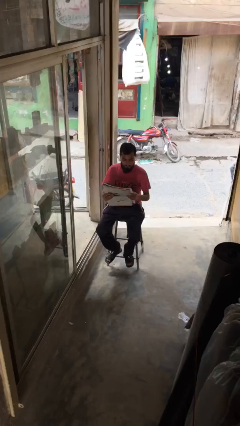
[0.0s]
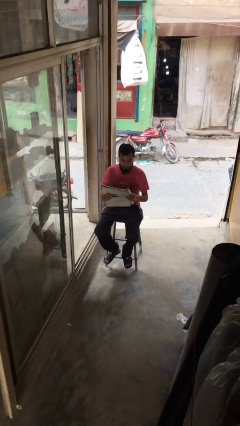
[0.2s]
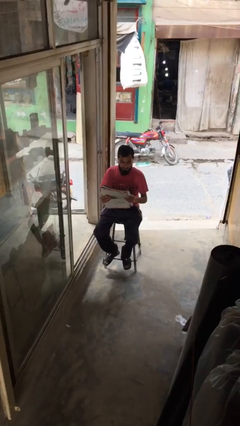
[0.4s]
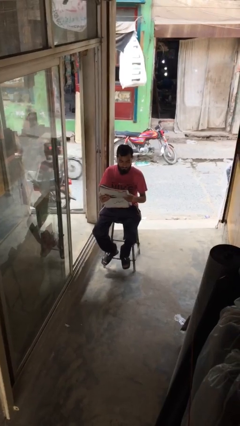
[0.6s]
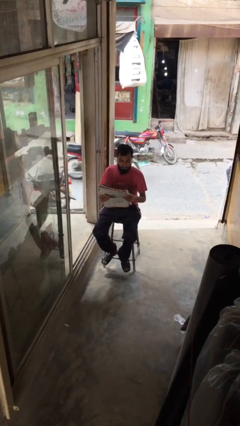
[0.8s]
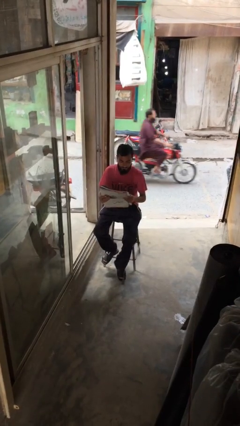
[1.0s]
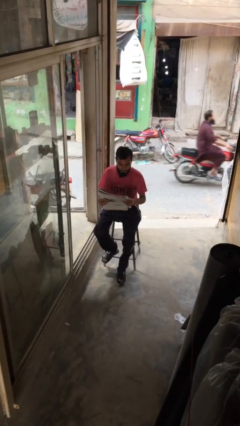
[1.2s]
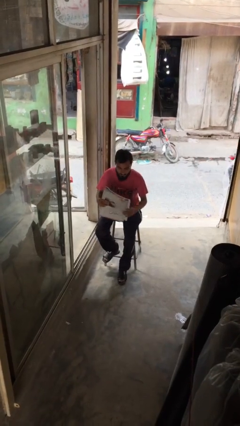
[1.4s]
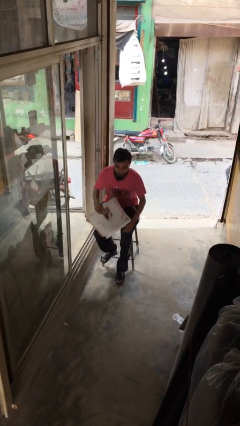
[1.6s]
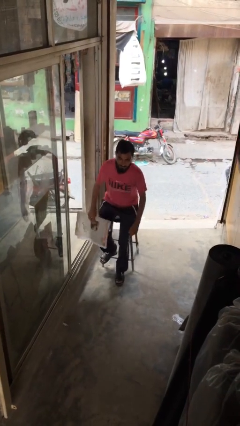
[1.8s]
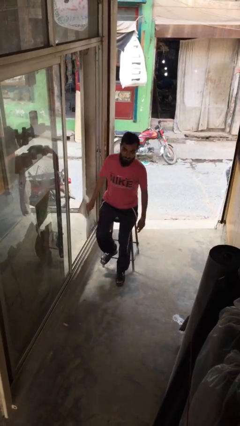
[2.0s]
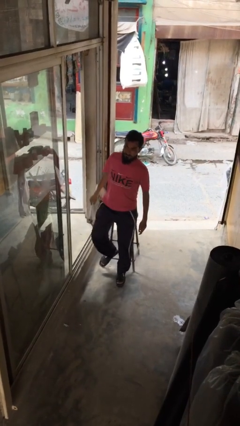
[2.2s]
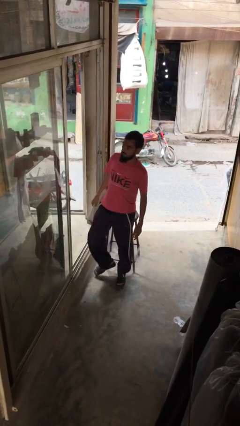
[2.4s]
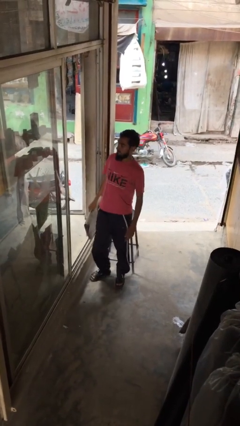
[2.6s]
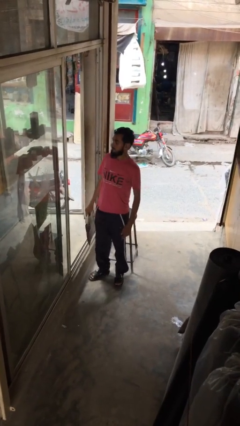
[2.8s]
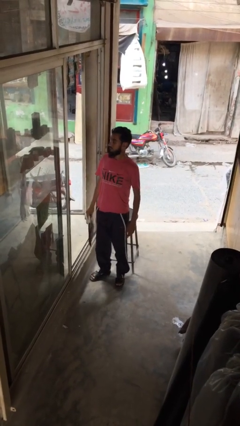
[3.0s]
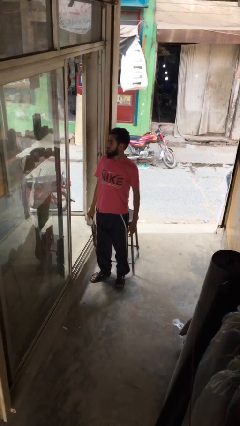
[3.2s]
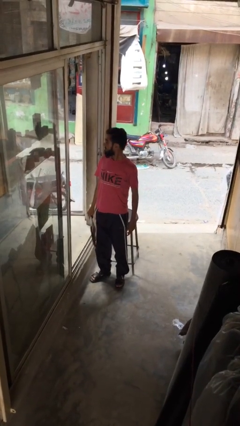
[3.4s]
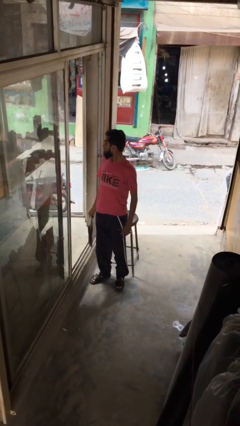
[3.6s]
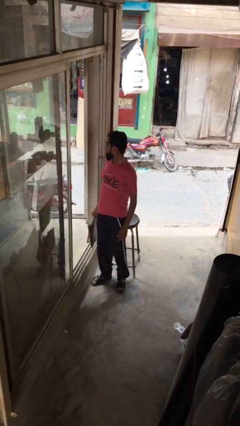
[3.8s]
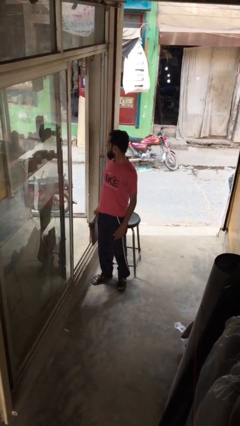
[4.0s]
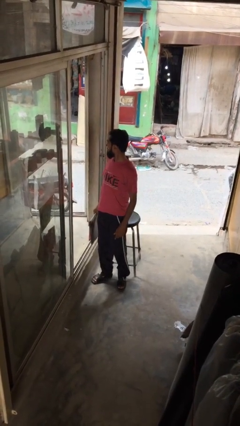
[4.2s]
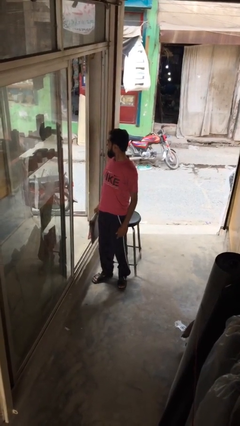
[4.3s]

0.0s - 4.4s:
person stands up

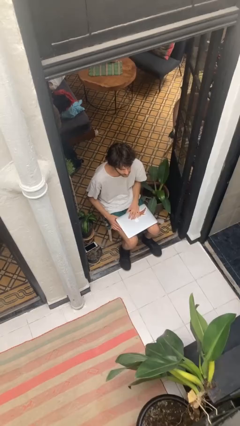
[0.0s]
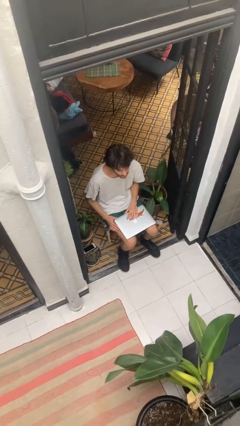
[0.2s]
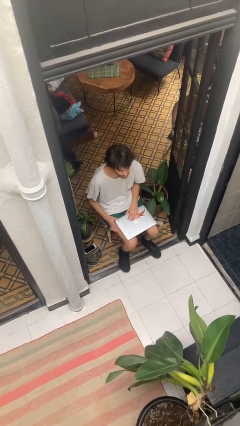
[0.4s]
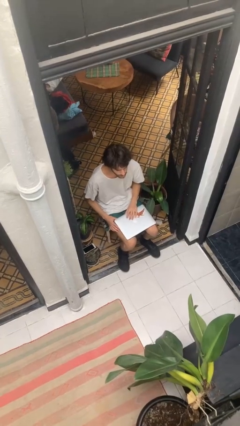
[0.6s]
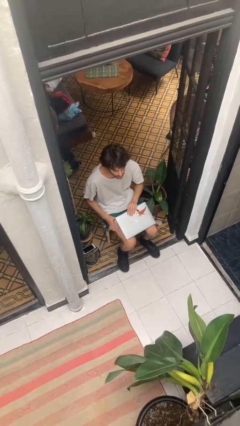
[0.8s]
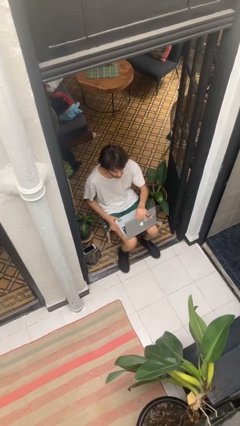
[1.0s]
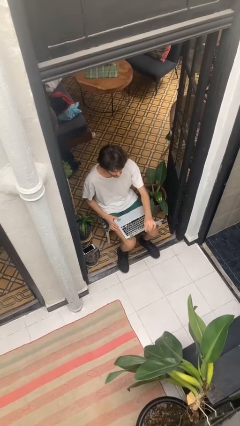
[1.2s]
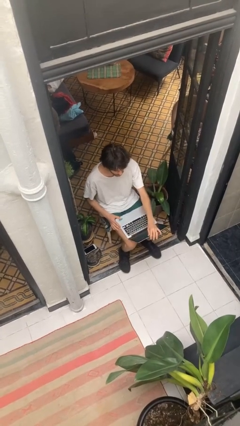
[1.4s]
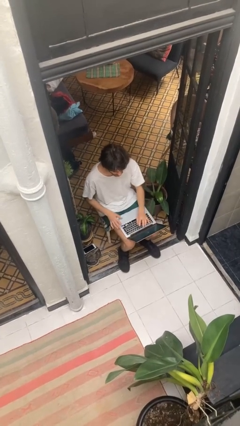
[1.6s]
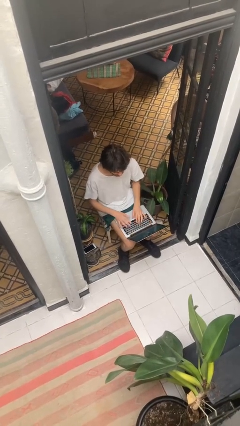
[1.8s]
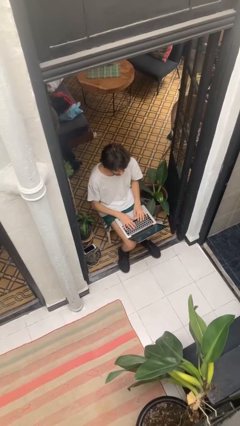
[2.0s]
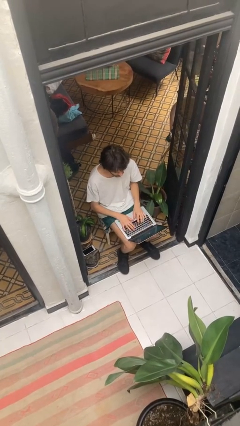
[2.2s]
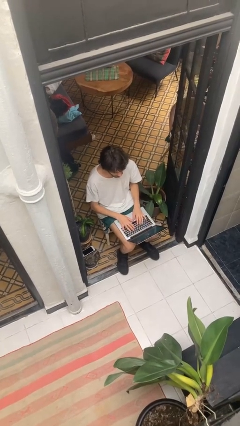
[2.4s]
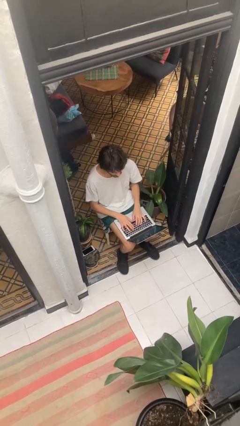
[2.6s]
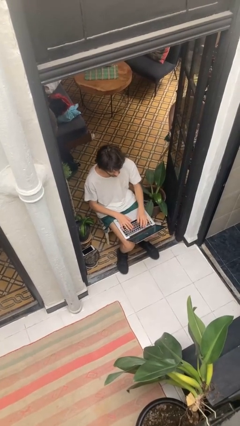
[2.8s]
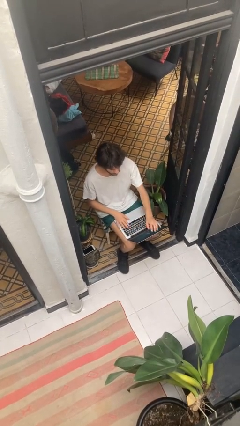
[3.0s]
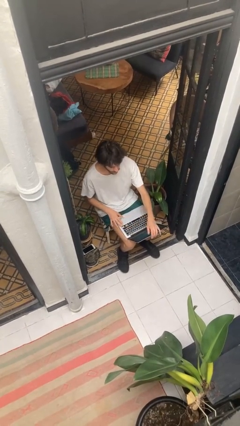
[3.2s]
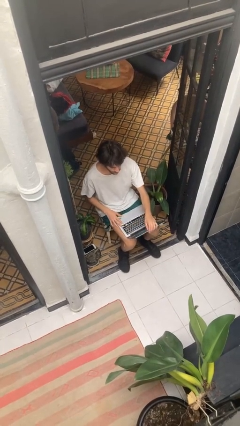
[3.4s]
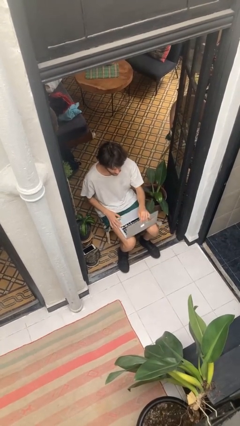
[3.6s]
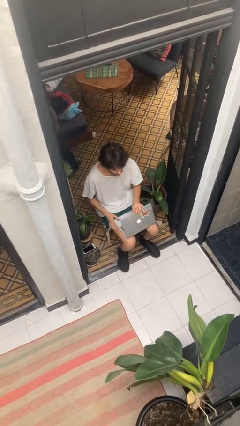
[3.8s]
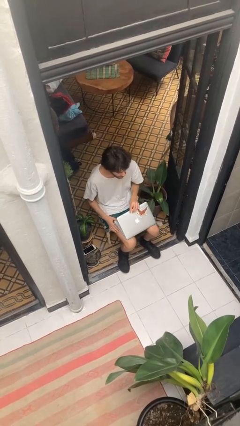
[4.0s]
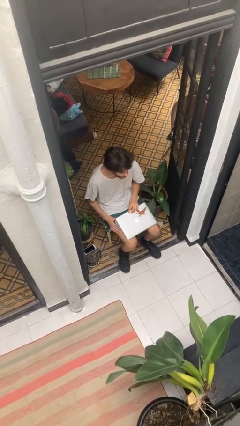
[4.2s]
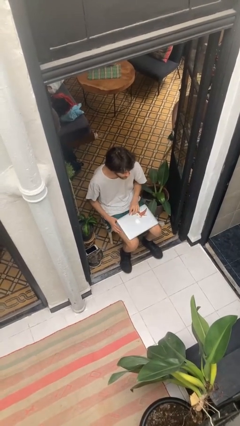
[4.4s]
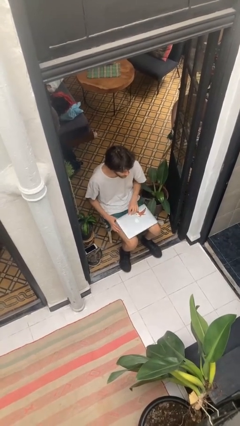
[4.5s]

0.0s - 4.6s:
person interacts with laptop

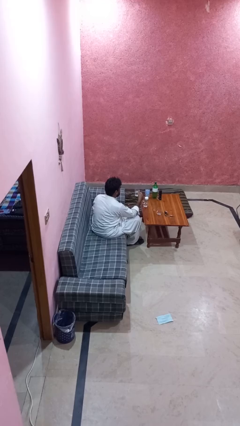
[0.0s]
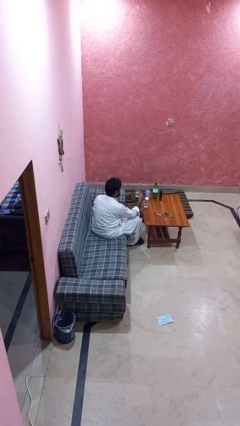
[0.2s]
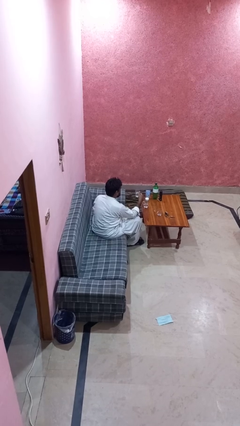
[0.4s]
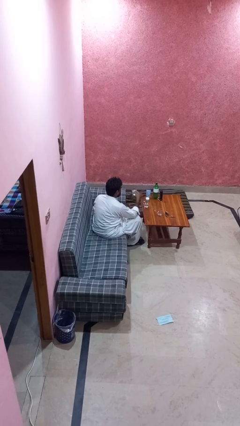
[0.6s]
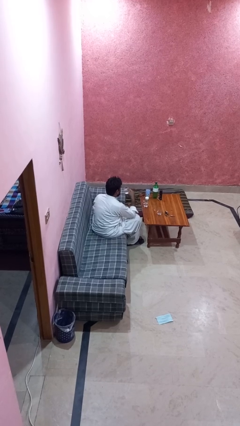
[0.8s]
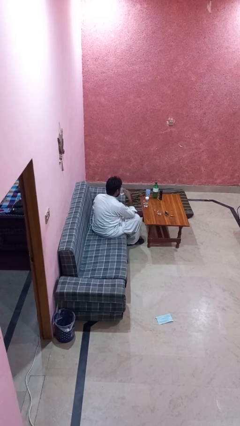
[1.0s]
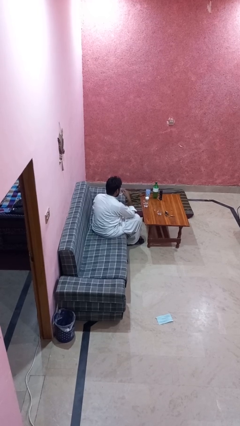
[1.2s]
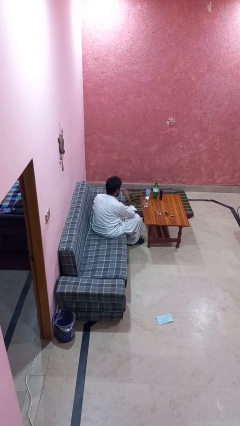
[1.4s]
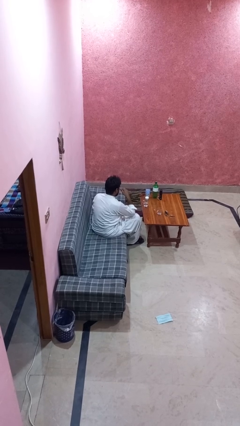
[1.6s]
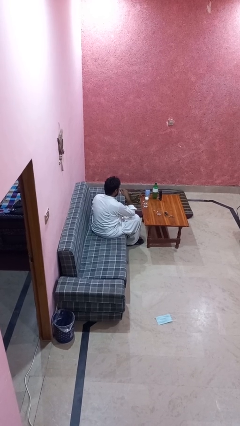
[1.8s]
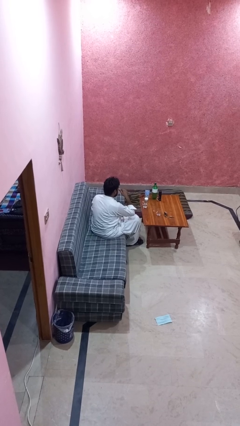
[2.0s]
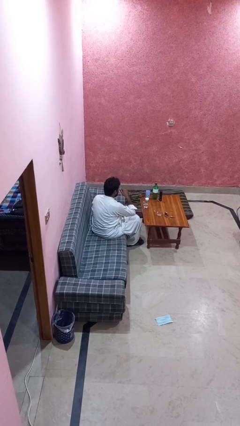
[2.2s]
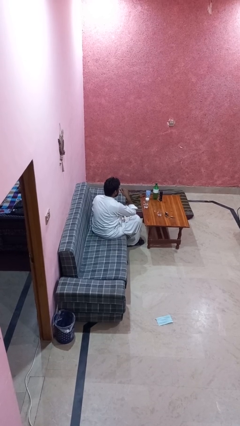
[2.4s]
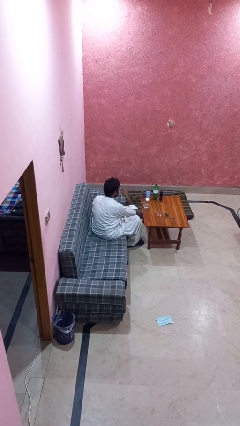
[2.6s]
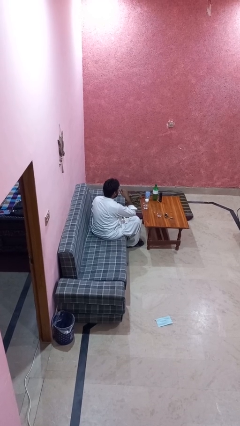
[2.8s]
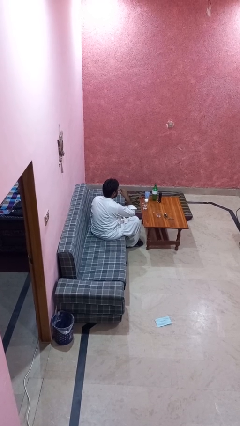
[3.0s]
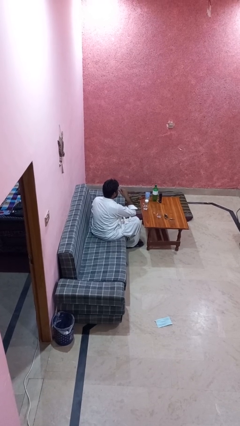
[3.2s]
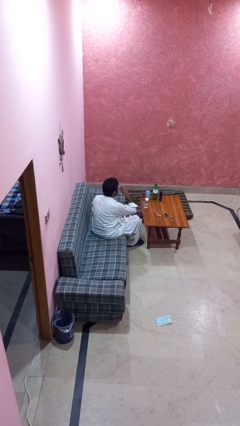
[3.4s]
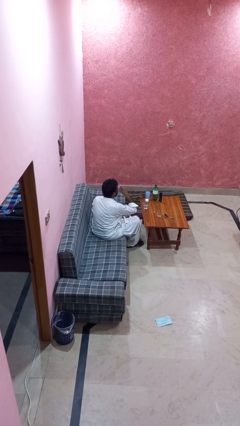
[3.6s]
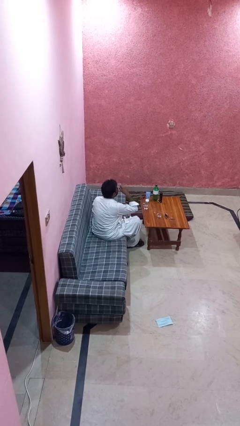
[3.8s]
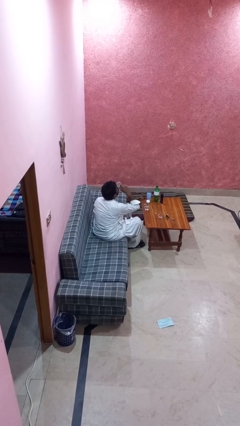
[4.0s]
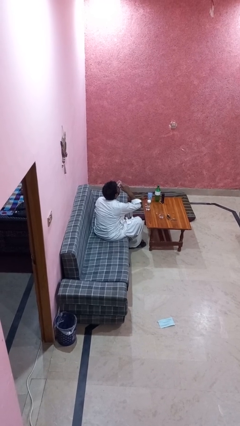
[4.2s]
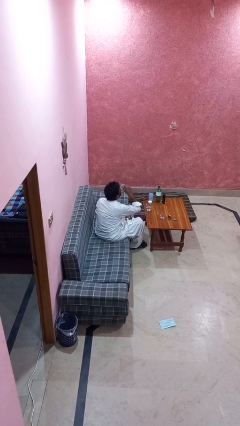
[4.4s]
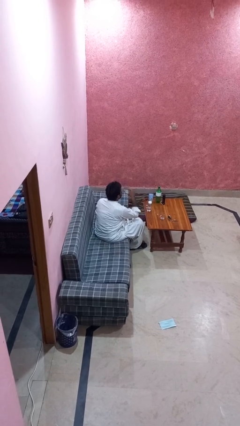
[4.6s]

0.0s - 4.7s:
person drinks from shotglass

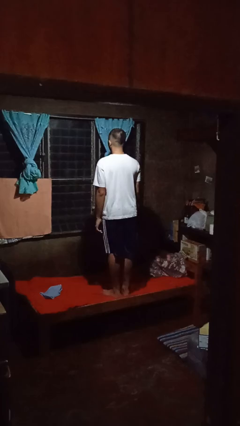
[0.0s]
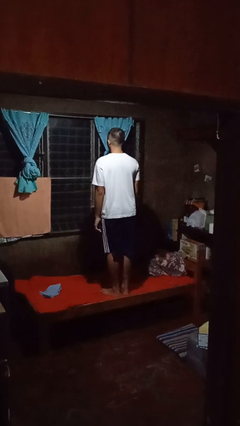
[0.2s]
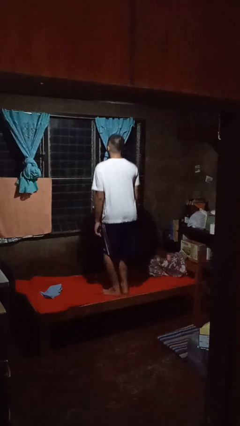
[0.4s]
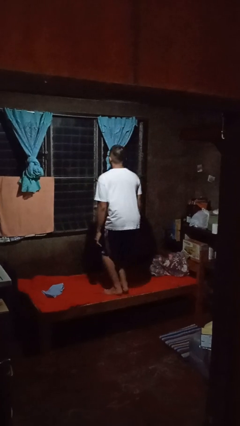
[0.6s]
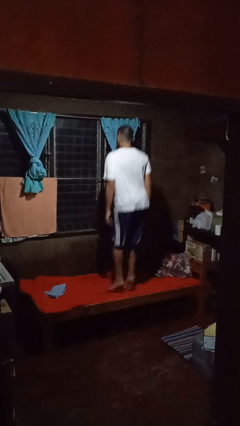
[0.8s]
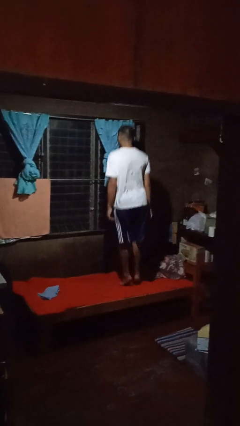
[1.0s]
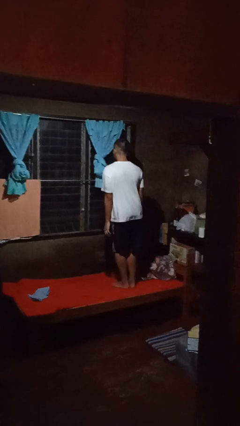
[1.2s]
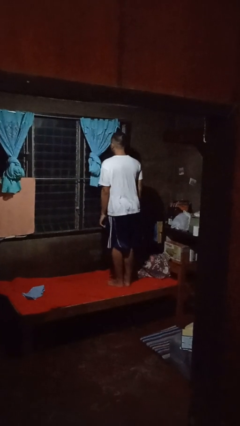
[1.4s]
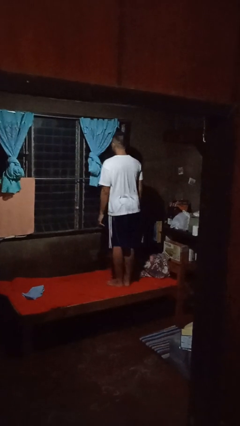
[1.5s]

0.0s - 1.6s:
person jumps on bed

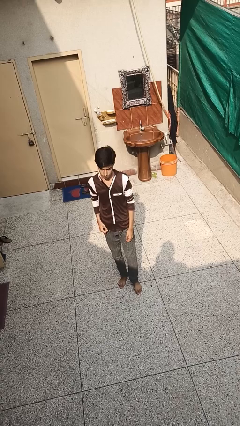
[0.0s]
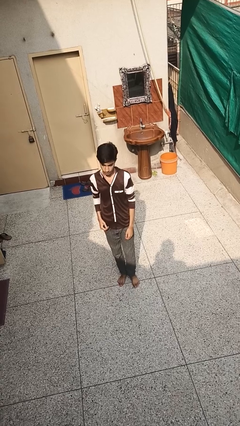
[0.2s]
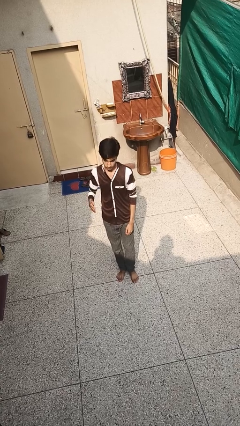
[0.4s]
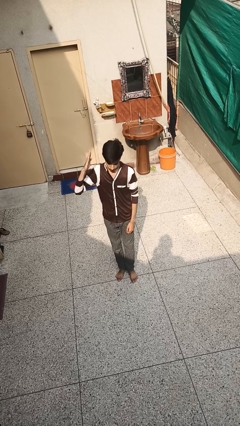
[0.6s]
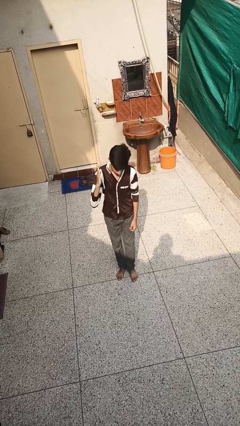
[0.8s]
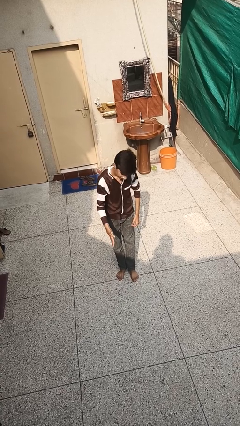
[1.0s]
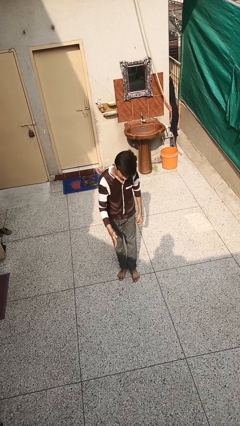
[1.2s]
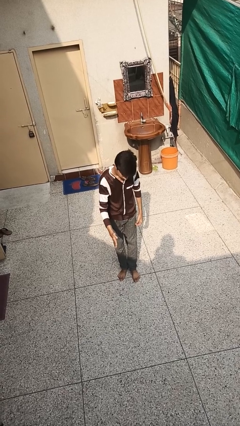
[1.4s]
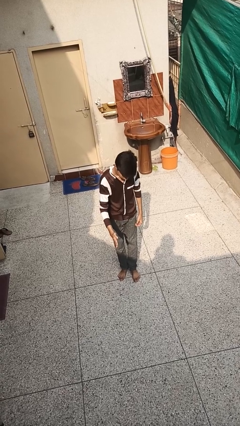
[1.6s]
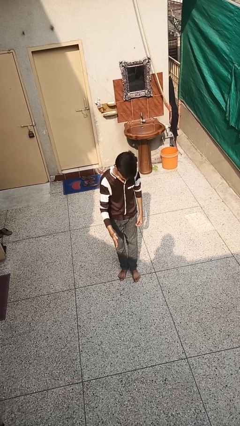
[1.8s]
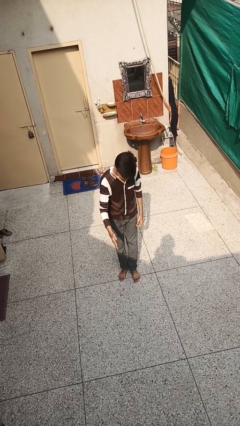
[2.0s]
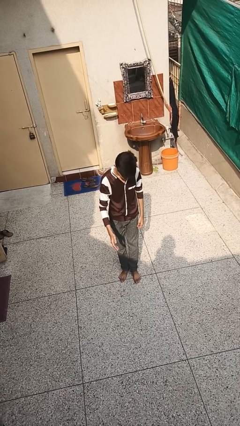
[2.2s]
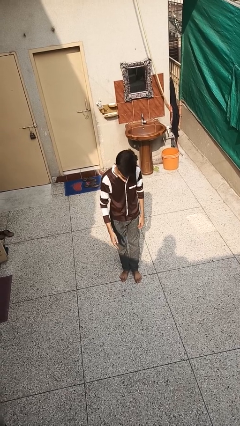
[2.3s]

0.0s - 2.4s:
person karate chop
